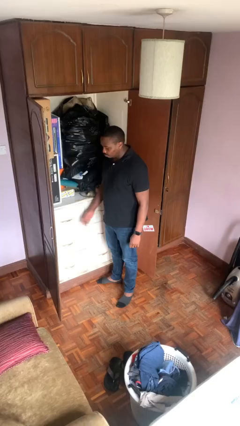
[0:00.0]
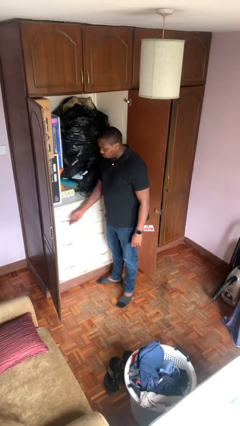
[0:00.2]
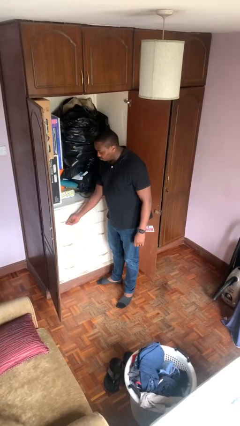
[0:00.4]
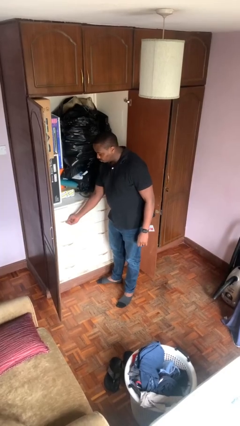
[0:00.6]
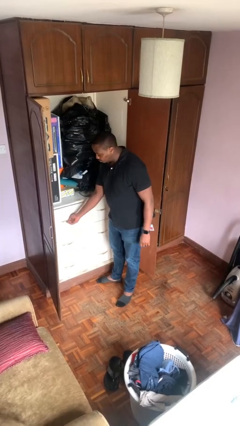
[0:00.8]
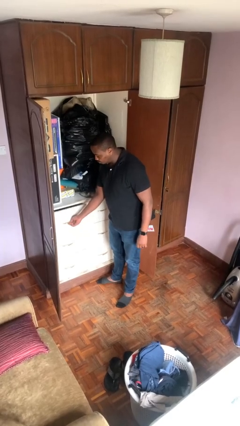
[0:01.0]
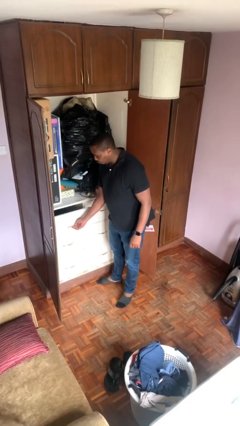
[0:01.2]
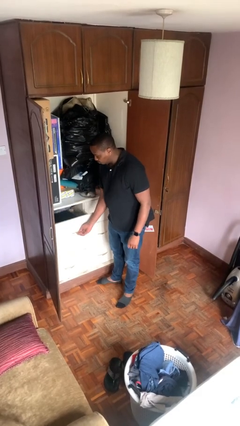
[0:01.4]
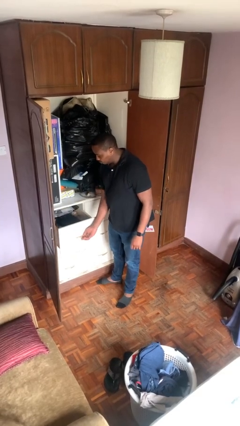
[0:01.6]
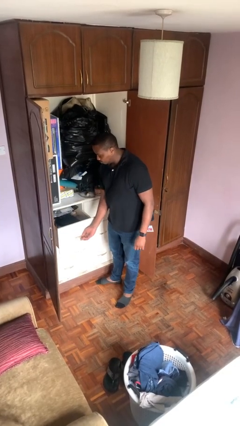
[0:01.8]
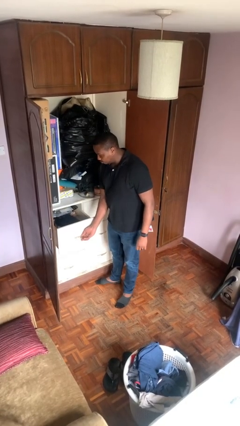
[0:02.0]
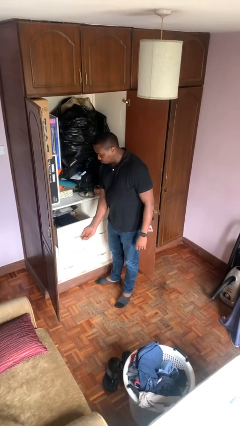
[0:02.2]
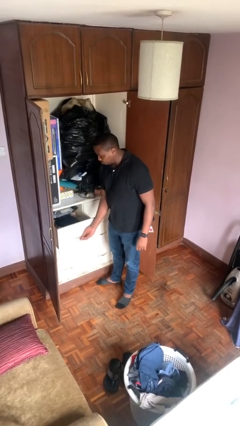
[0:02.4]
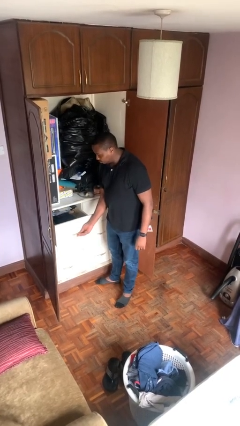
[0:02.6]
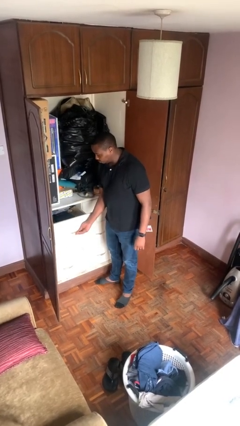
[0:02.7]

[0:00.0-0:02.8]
person opens dresser drawer

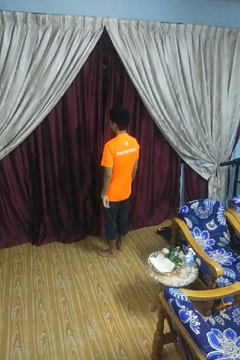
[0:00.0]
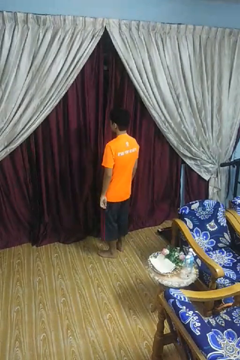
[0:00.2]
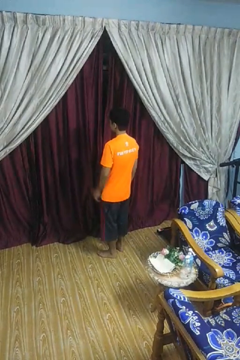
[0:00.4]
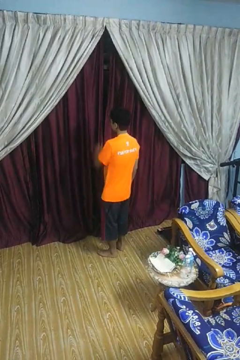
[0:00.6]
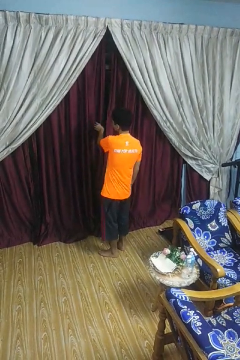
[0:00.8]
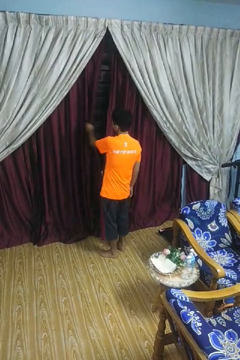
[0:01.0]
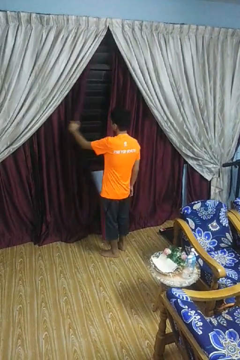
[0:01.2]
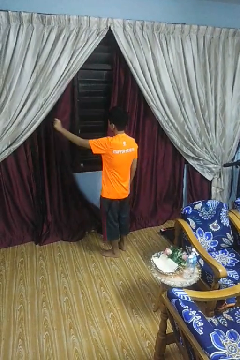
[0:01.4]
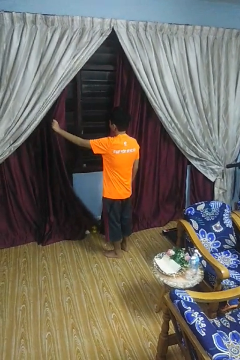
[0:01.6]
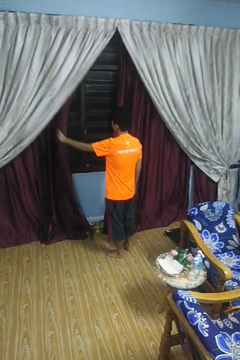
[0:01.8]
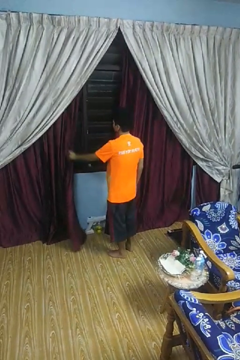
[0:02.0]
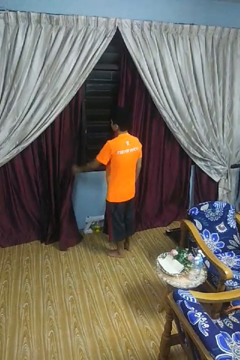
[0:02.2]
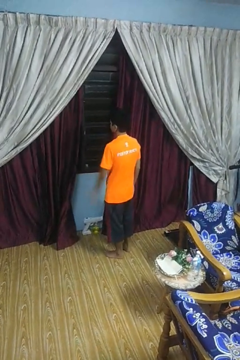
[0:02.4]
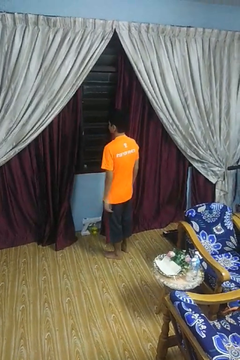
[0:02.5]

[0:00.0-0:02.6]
person opens curtains

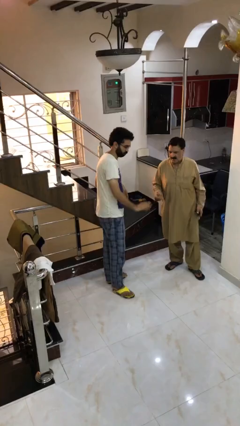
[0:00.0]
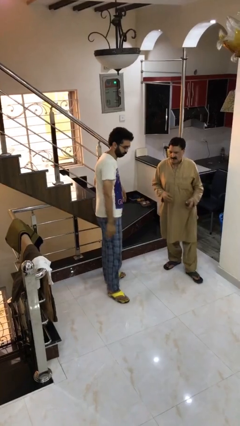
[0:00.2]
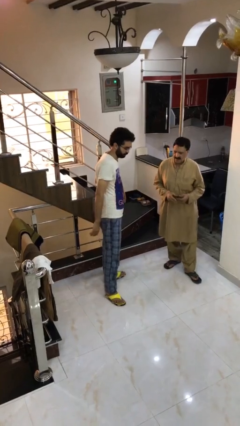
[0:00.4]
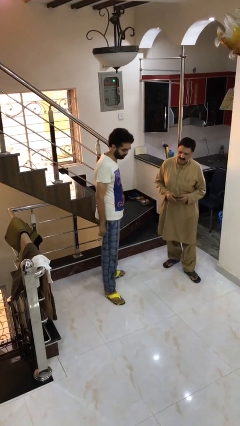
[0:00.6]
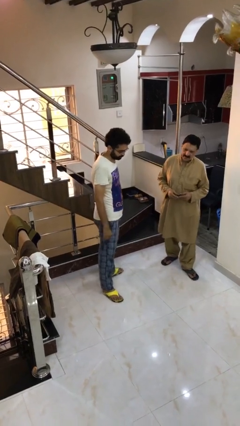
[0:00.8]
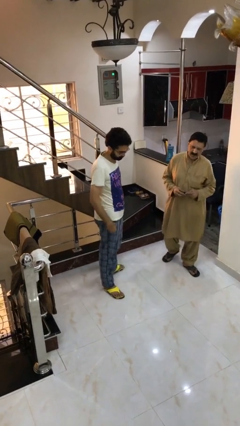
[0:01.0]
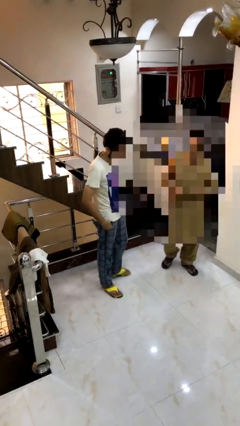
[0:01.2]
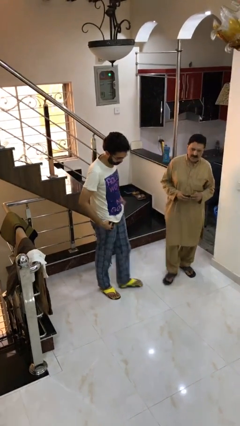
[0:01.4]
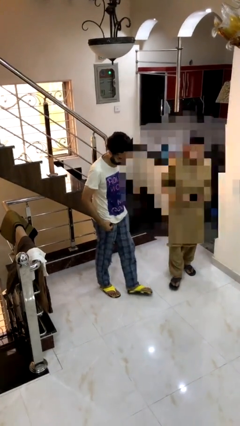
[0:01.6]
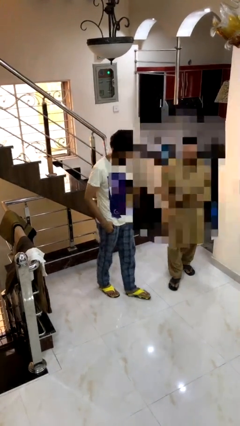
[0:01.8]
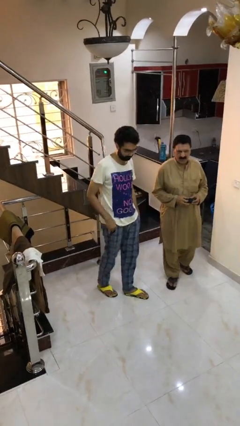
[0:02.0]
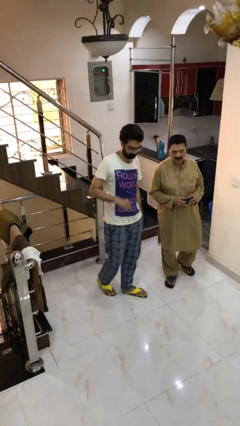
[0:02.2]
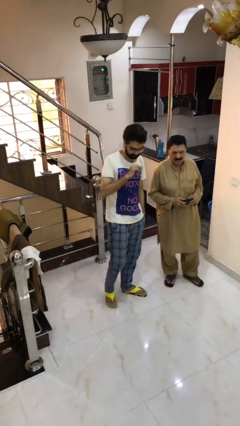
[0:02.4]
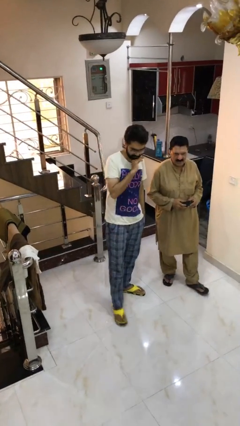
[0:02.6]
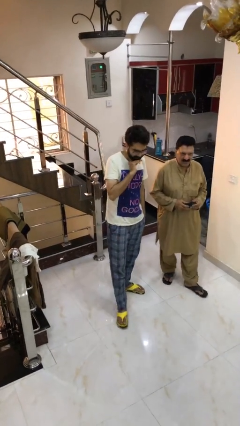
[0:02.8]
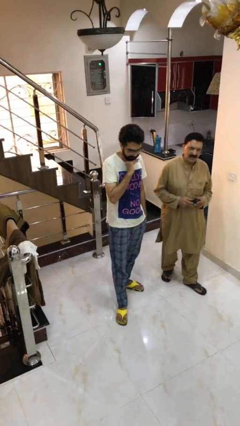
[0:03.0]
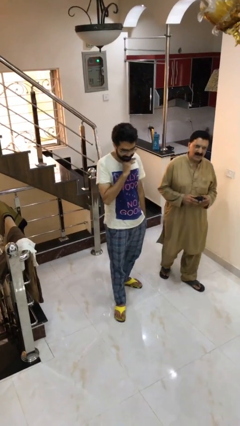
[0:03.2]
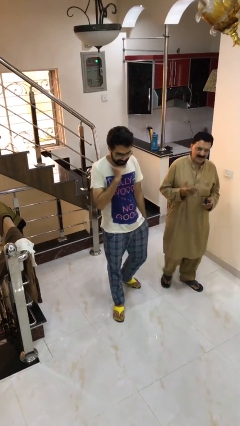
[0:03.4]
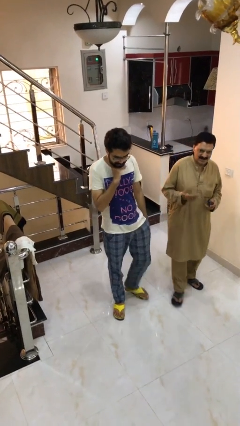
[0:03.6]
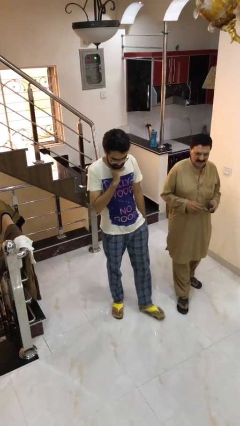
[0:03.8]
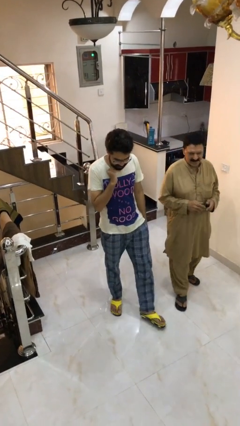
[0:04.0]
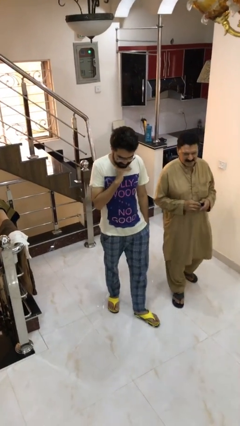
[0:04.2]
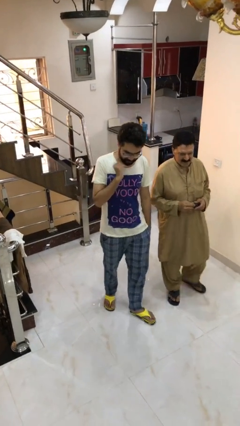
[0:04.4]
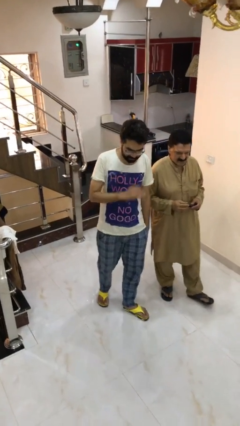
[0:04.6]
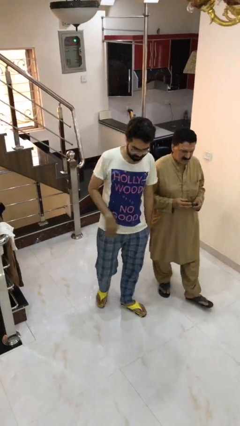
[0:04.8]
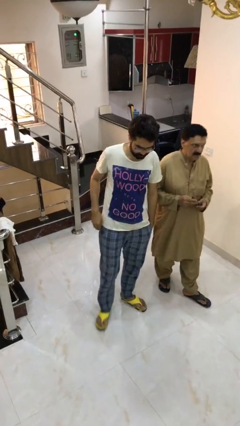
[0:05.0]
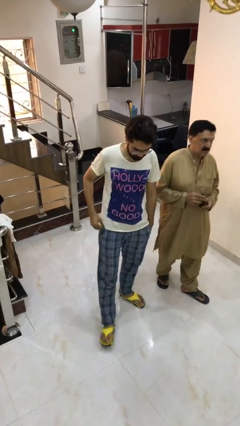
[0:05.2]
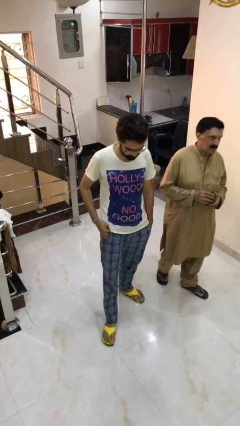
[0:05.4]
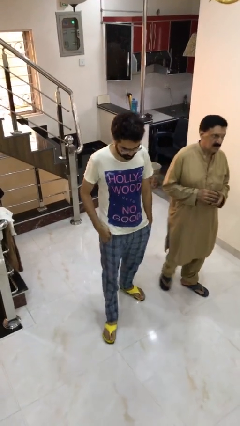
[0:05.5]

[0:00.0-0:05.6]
person talks to person

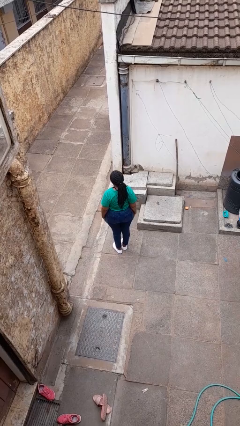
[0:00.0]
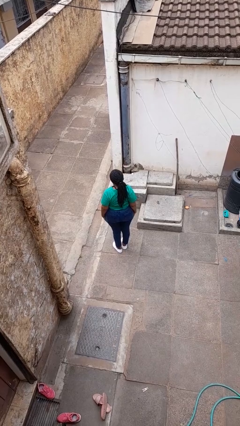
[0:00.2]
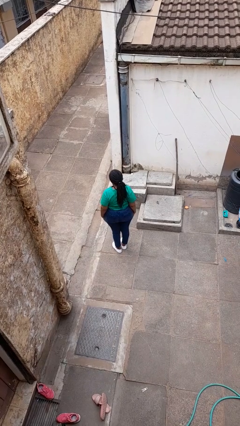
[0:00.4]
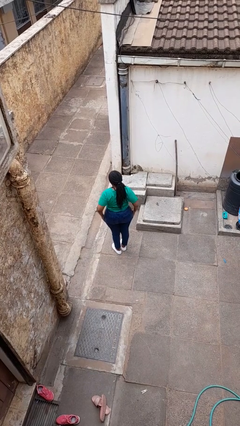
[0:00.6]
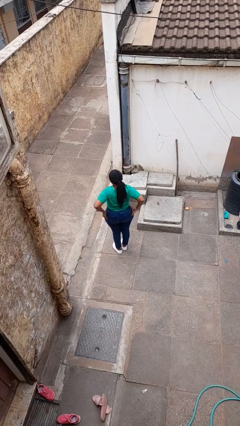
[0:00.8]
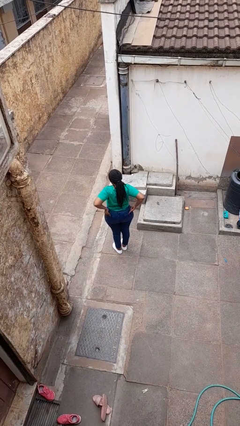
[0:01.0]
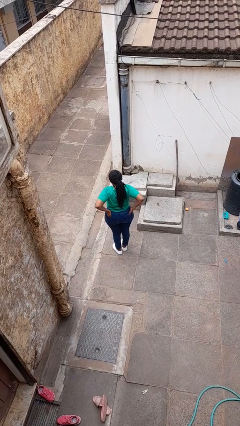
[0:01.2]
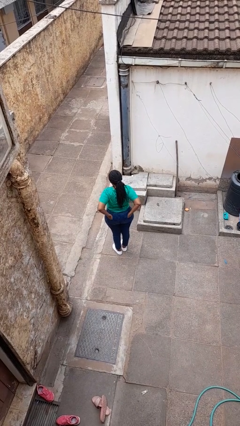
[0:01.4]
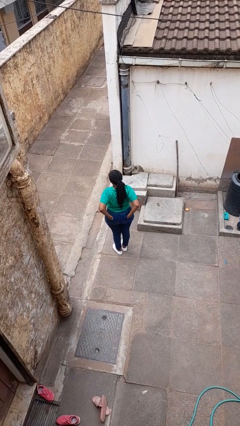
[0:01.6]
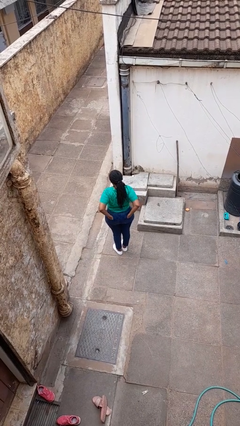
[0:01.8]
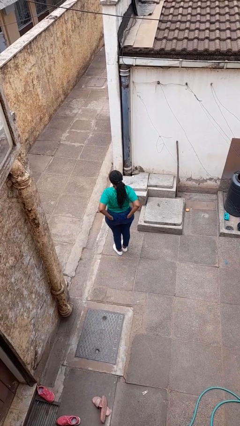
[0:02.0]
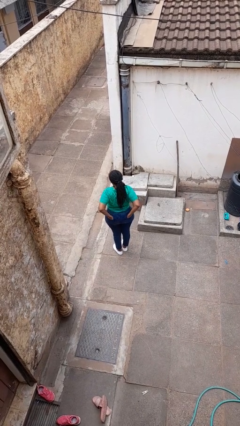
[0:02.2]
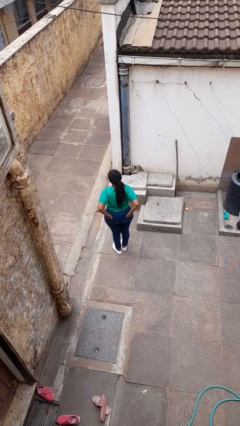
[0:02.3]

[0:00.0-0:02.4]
person puts hands in back pockets

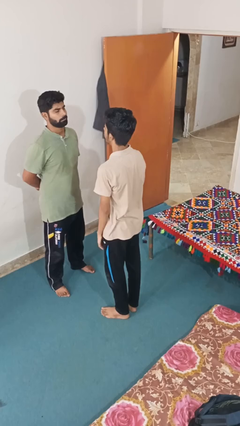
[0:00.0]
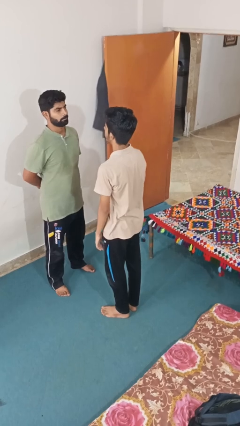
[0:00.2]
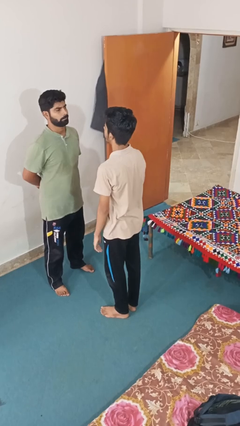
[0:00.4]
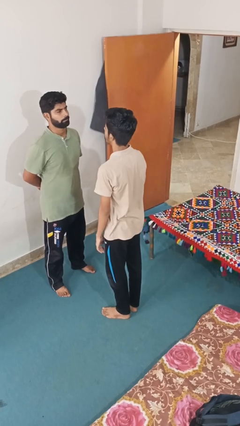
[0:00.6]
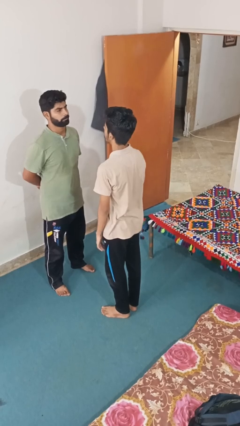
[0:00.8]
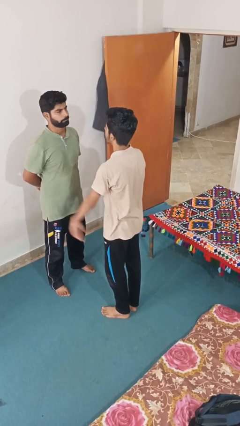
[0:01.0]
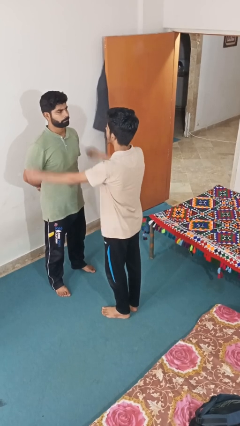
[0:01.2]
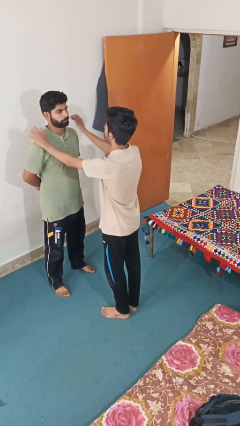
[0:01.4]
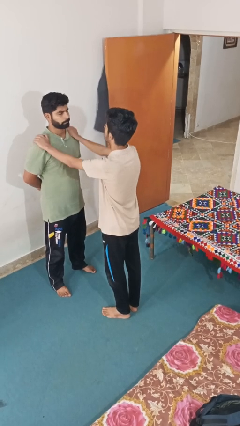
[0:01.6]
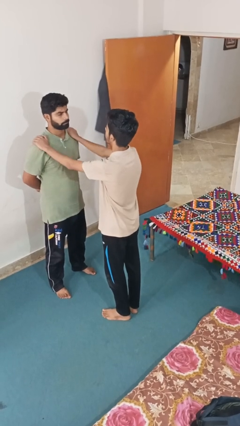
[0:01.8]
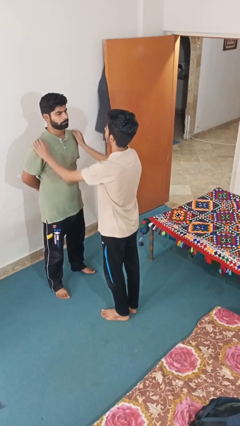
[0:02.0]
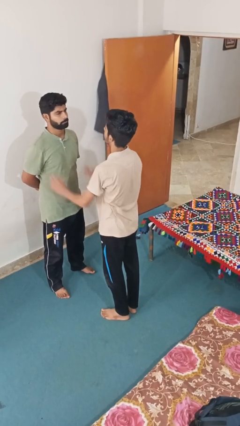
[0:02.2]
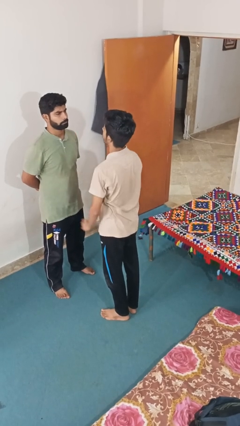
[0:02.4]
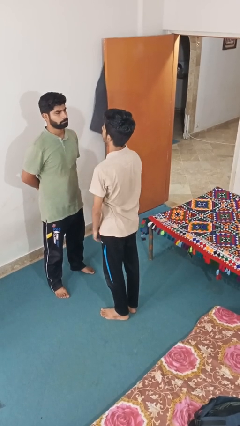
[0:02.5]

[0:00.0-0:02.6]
person pounds shoulders of person

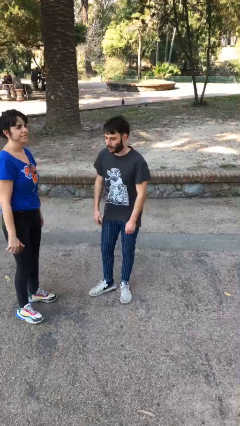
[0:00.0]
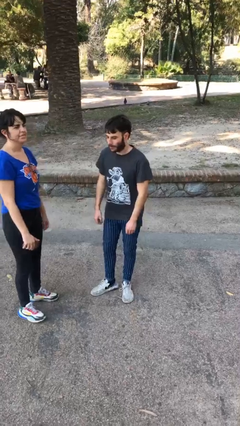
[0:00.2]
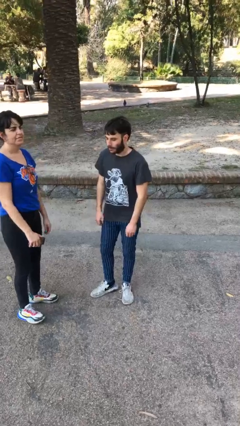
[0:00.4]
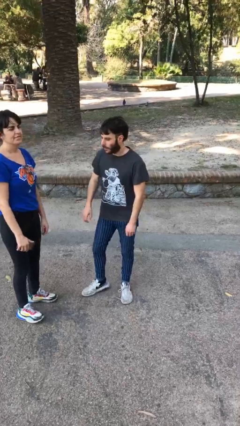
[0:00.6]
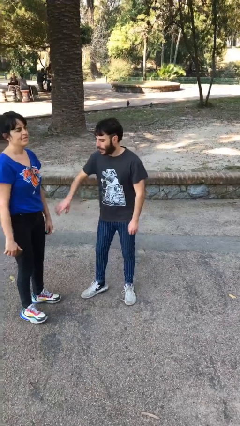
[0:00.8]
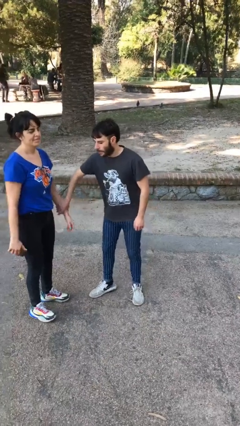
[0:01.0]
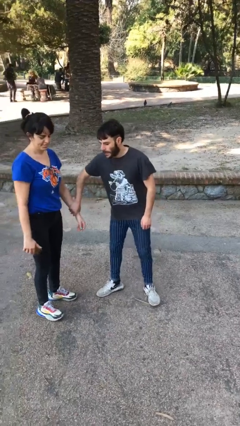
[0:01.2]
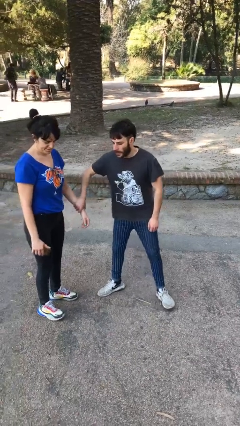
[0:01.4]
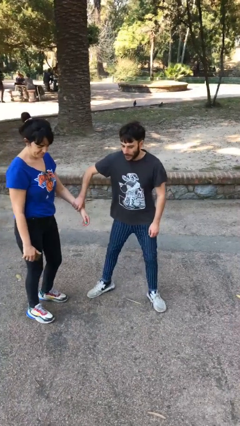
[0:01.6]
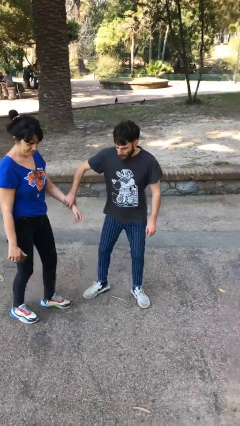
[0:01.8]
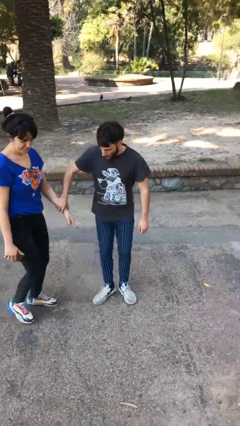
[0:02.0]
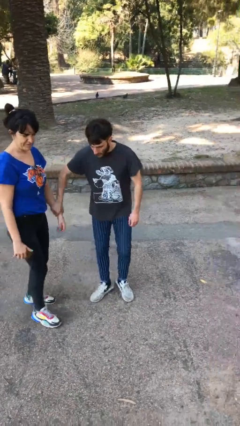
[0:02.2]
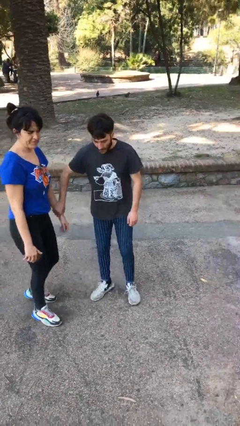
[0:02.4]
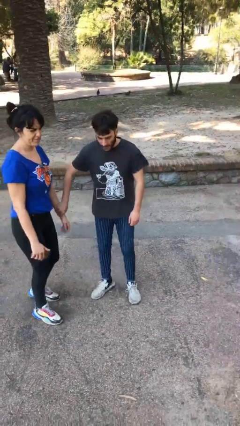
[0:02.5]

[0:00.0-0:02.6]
person grabs person by forearm
